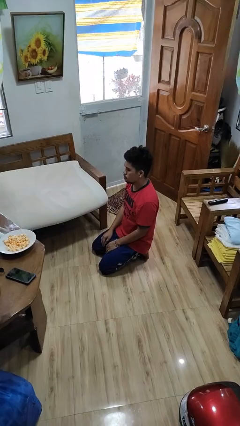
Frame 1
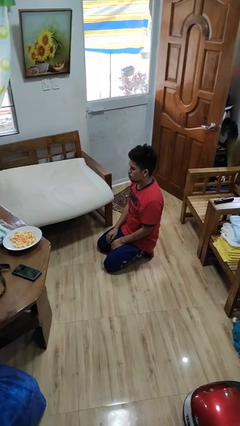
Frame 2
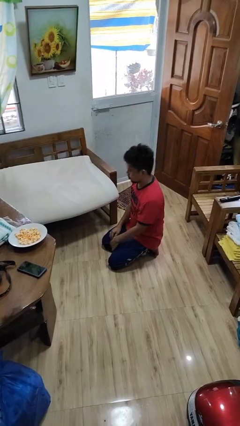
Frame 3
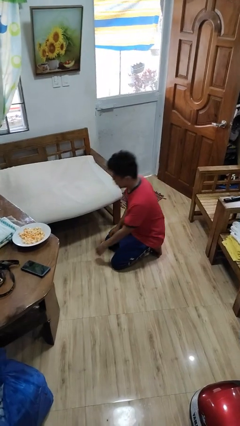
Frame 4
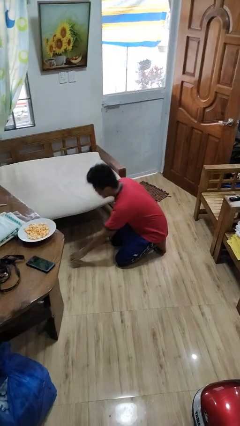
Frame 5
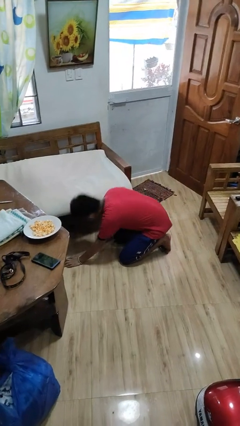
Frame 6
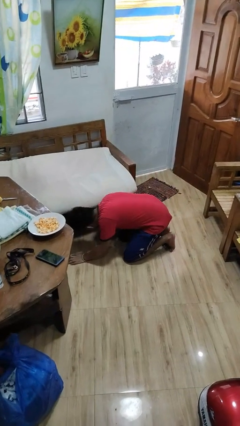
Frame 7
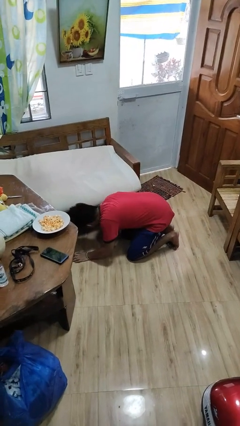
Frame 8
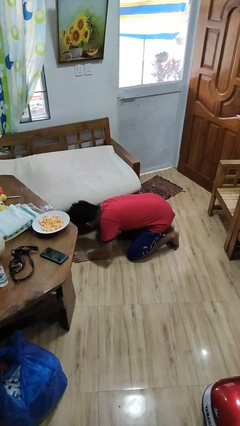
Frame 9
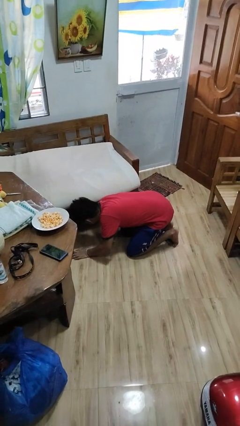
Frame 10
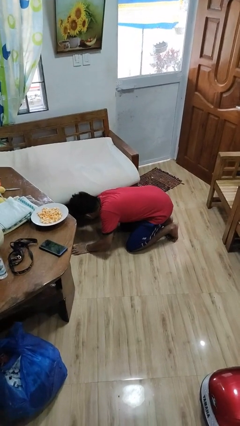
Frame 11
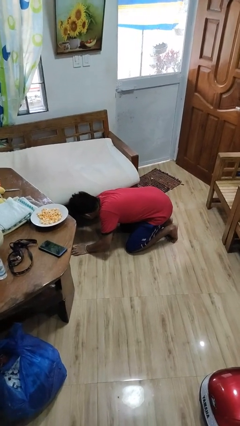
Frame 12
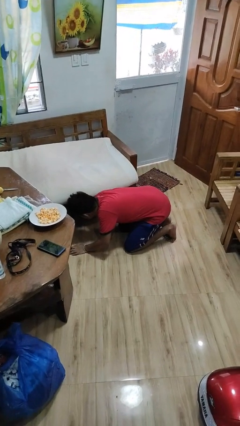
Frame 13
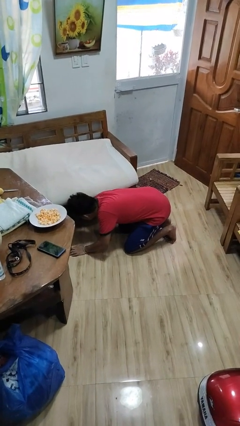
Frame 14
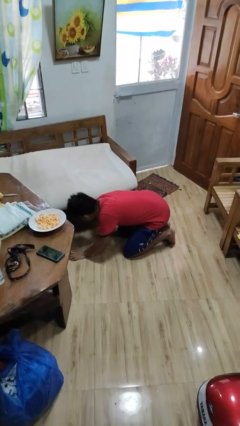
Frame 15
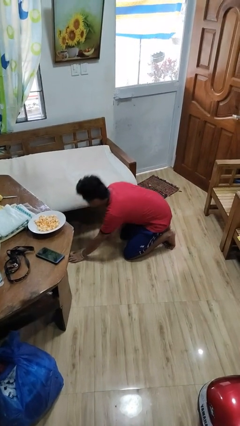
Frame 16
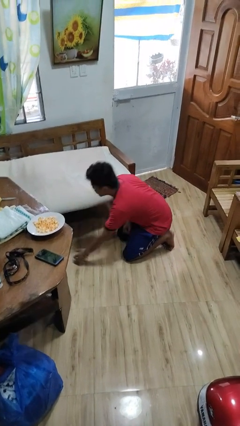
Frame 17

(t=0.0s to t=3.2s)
person searches under couch

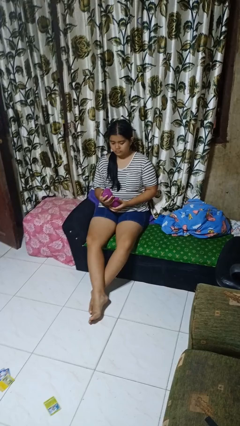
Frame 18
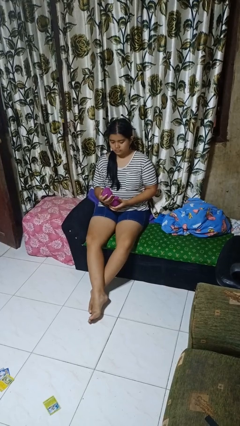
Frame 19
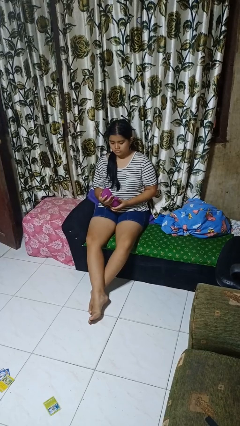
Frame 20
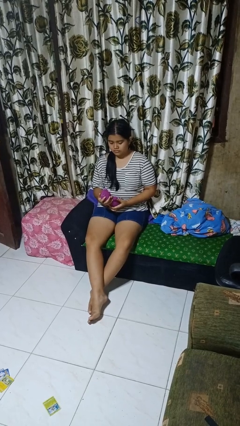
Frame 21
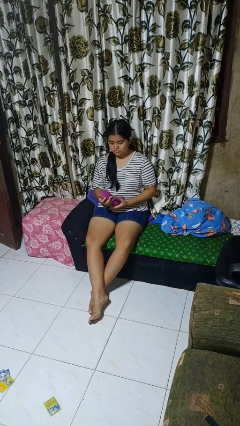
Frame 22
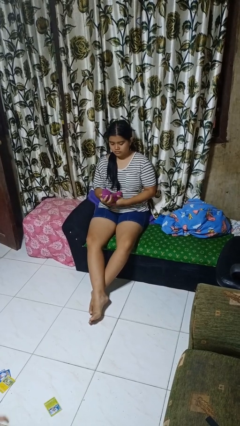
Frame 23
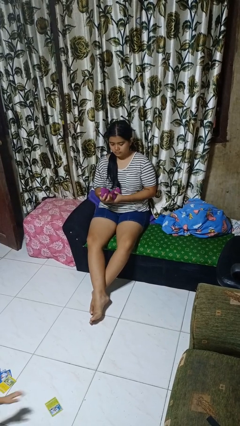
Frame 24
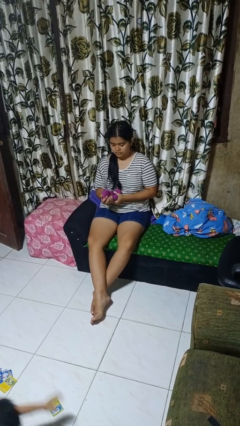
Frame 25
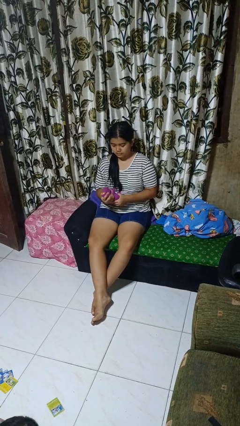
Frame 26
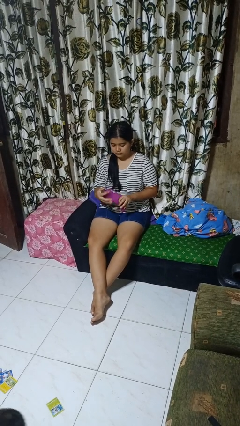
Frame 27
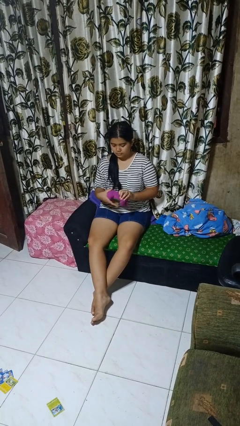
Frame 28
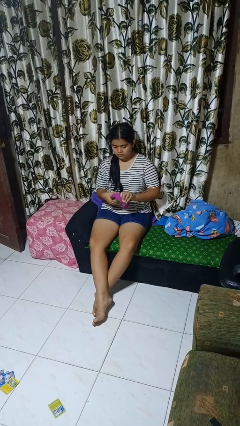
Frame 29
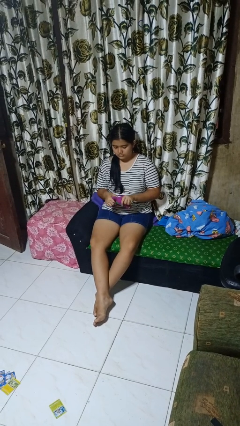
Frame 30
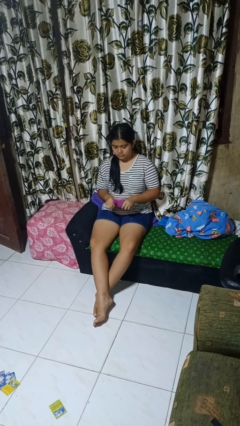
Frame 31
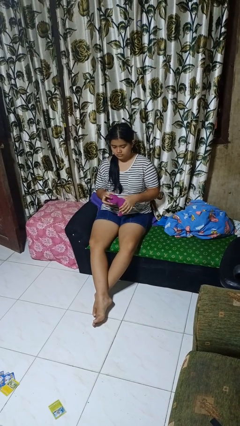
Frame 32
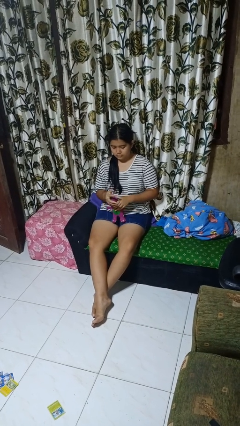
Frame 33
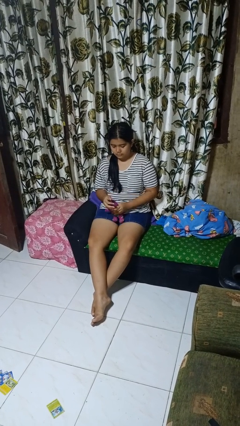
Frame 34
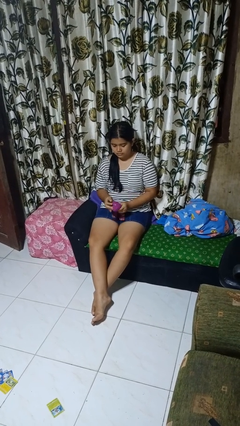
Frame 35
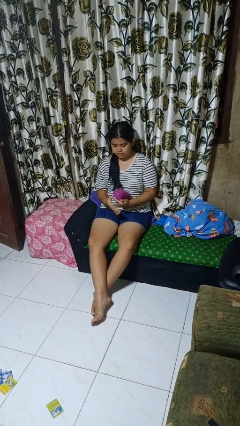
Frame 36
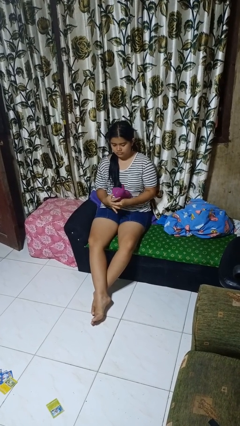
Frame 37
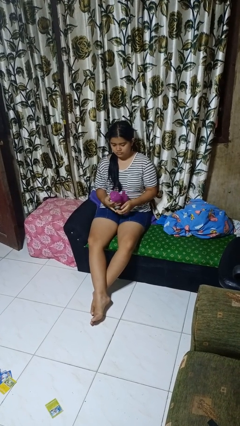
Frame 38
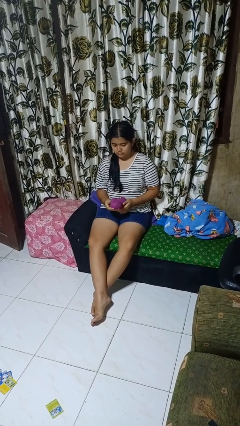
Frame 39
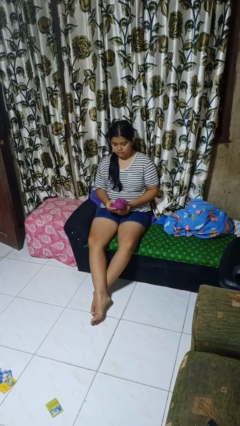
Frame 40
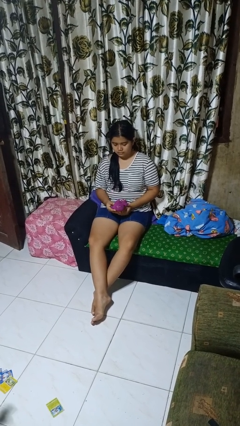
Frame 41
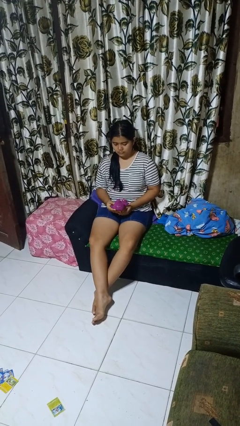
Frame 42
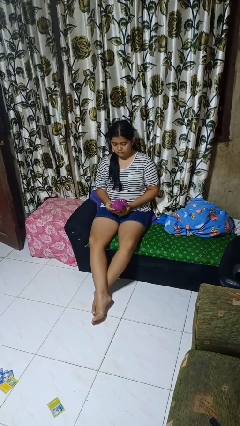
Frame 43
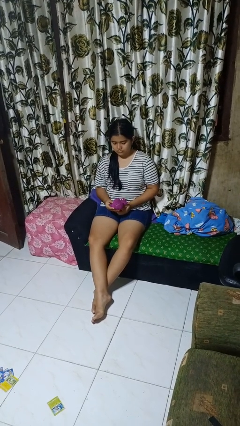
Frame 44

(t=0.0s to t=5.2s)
person squeezes object

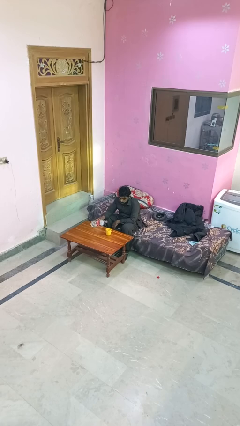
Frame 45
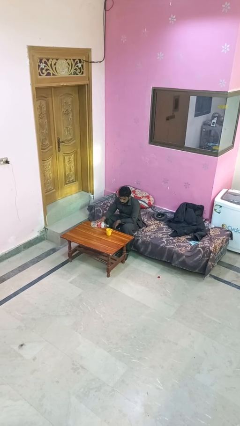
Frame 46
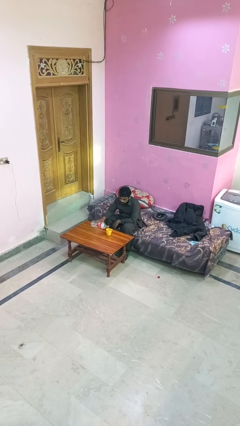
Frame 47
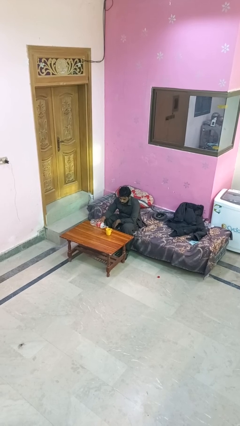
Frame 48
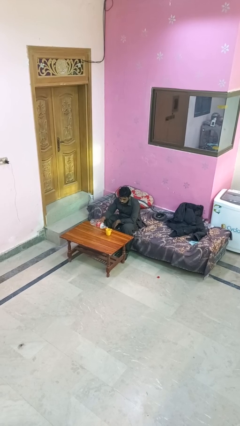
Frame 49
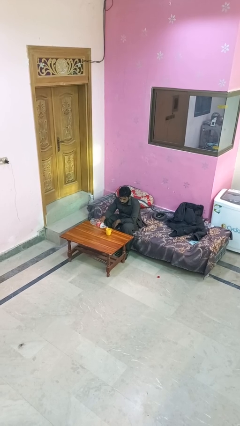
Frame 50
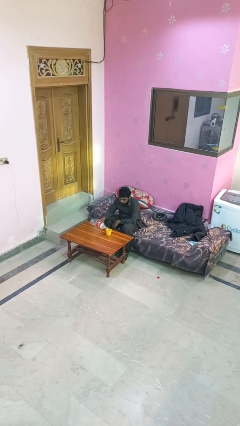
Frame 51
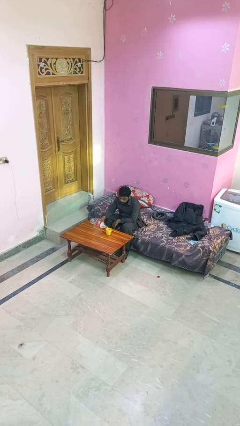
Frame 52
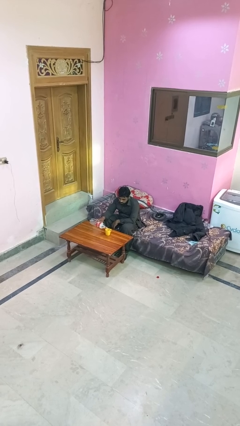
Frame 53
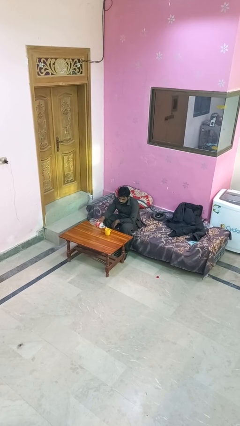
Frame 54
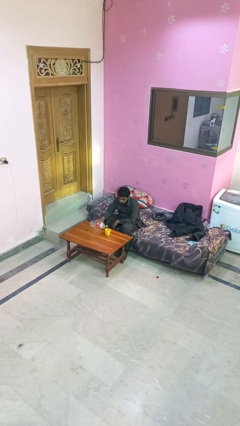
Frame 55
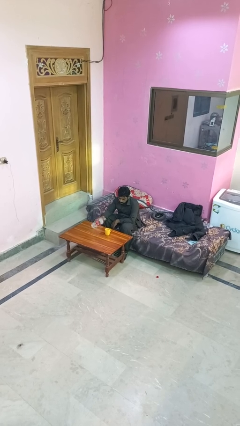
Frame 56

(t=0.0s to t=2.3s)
person pours liquid into cup

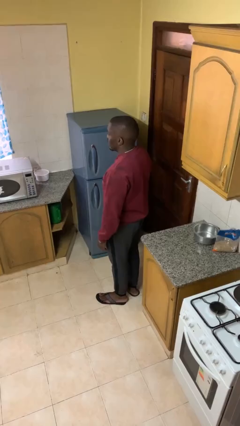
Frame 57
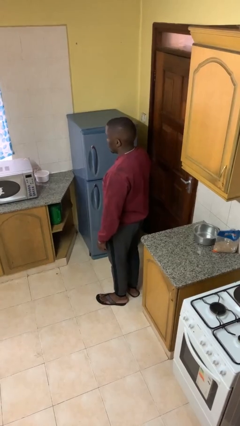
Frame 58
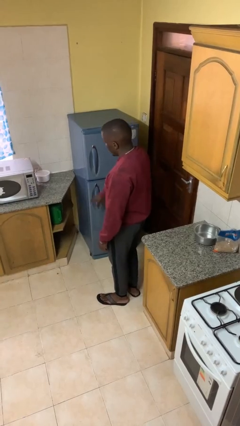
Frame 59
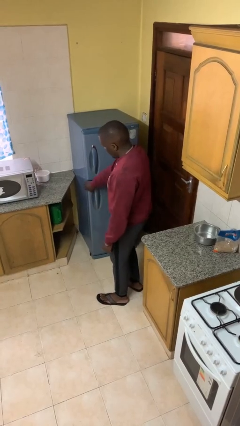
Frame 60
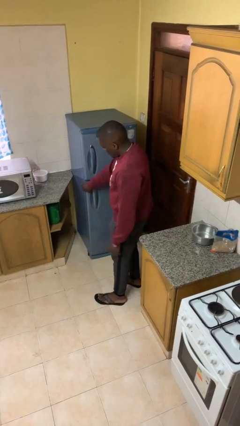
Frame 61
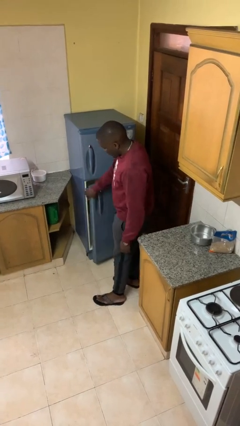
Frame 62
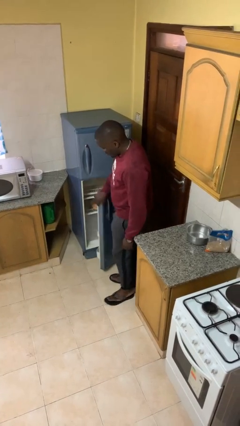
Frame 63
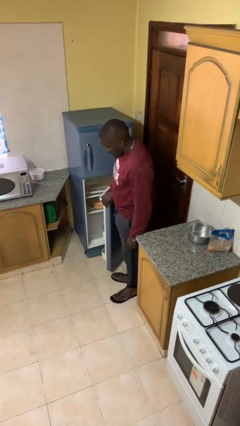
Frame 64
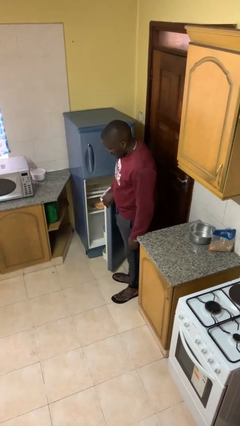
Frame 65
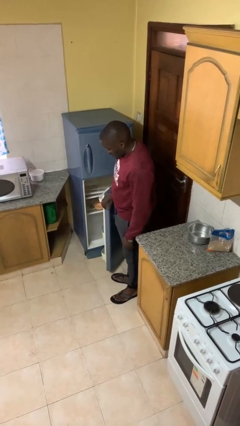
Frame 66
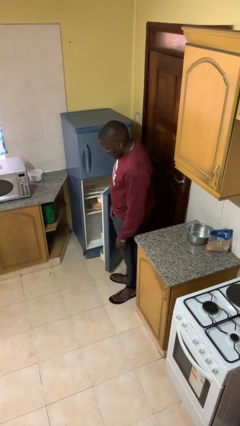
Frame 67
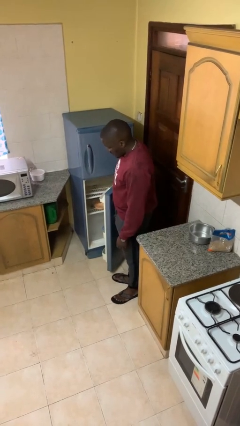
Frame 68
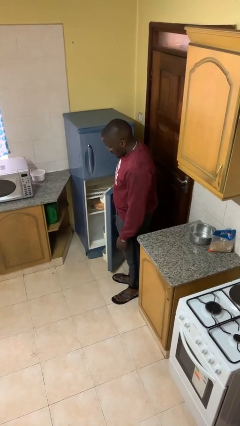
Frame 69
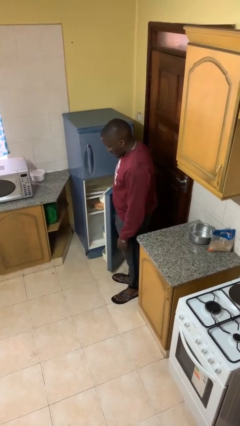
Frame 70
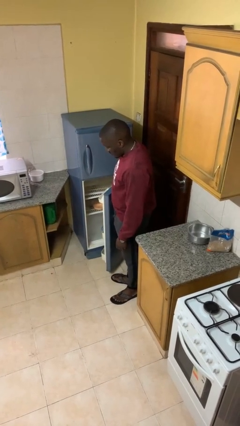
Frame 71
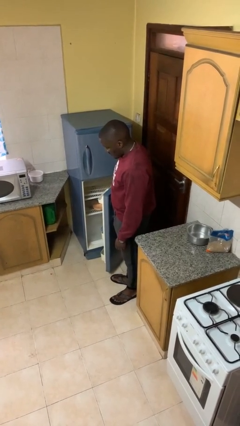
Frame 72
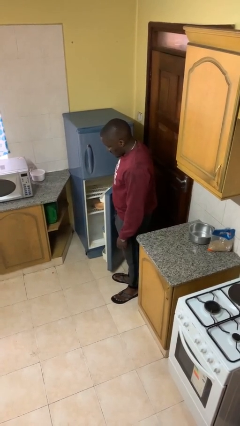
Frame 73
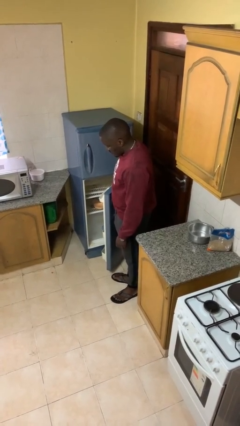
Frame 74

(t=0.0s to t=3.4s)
person opens refrigerator

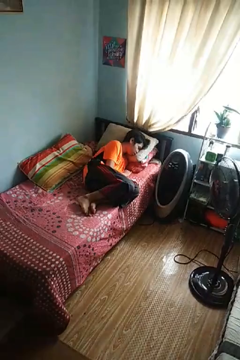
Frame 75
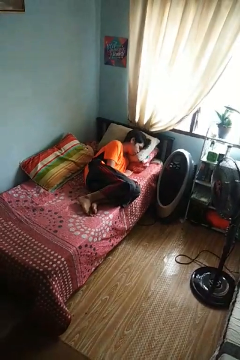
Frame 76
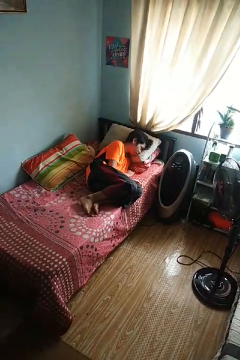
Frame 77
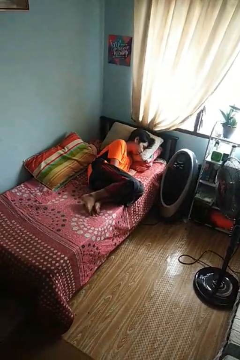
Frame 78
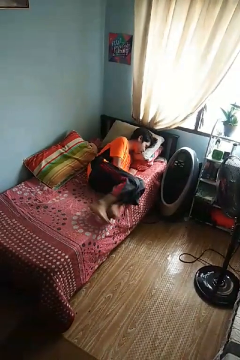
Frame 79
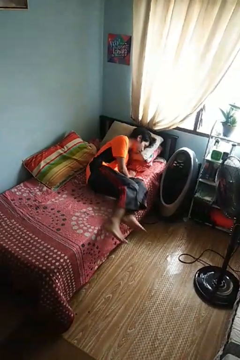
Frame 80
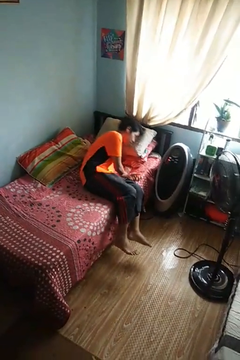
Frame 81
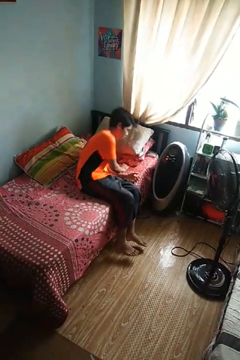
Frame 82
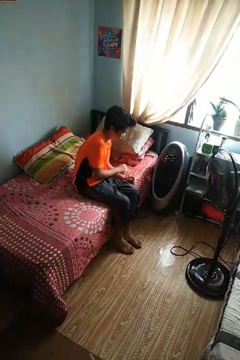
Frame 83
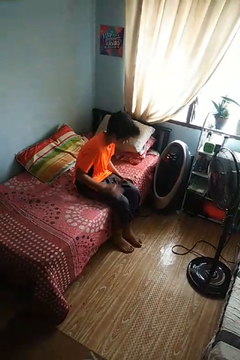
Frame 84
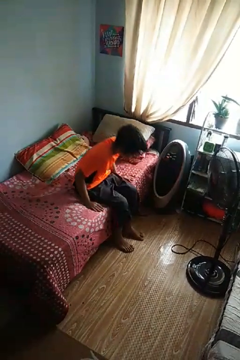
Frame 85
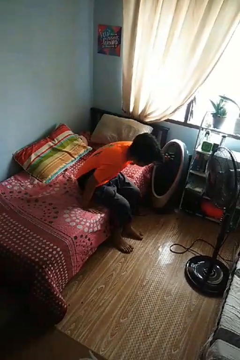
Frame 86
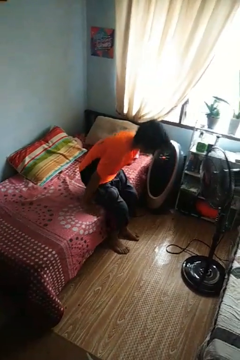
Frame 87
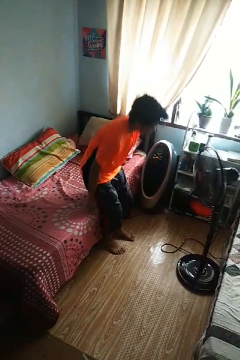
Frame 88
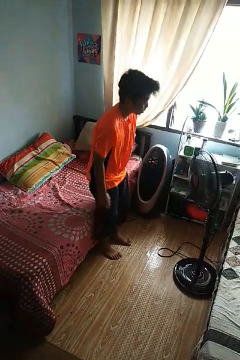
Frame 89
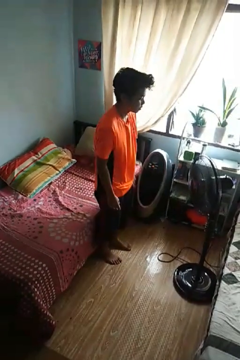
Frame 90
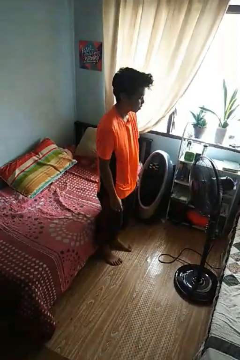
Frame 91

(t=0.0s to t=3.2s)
person stands up

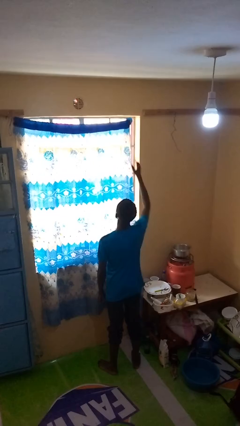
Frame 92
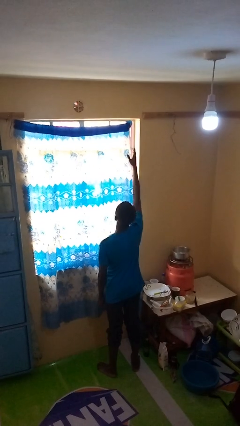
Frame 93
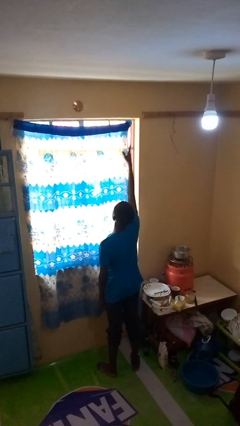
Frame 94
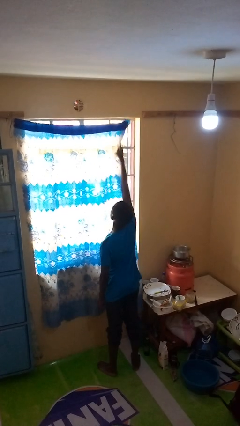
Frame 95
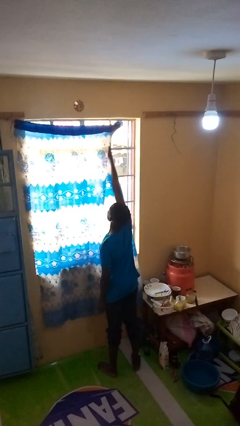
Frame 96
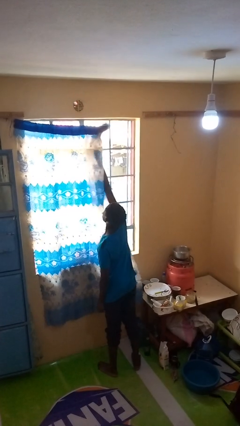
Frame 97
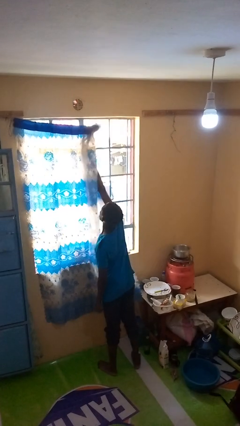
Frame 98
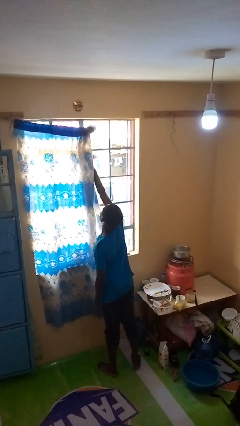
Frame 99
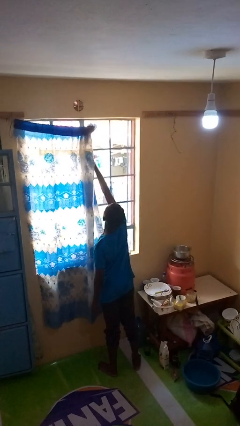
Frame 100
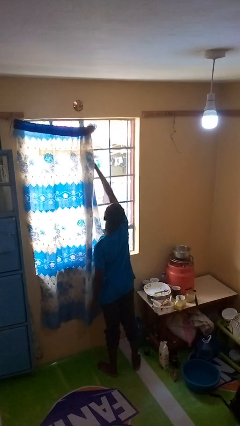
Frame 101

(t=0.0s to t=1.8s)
person opens curtains
